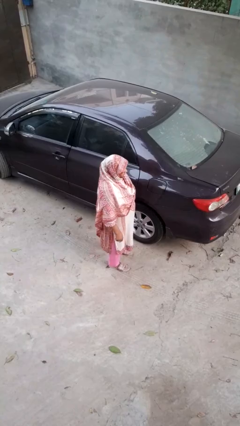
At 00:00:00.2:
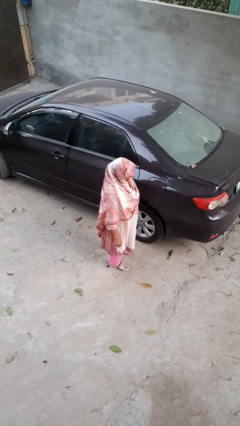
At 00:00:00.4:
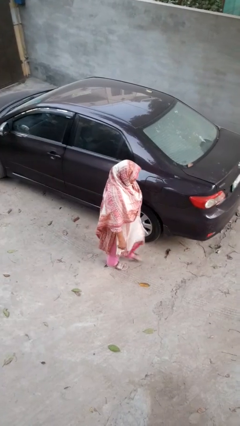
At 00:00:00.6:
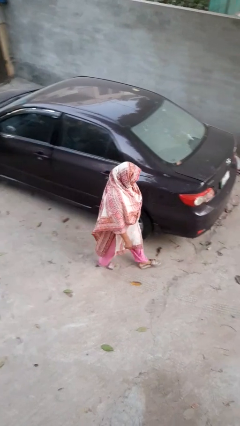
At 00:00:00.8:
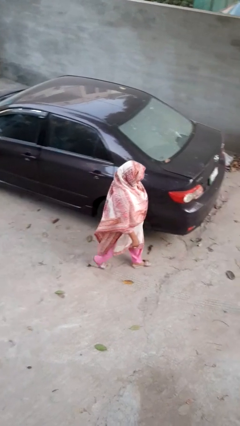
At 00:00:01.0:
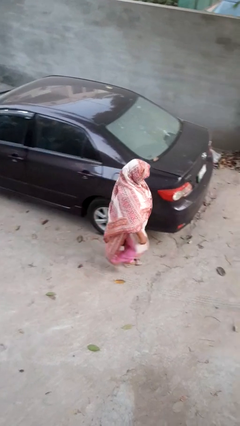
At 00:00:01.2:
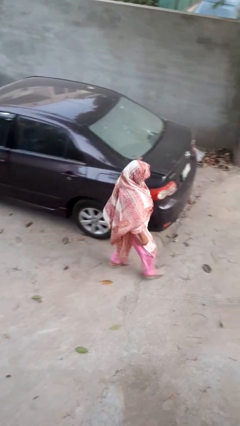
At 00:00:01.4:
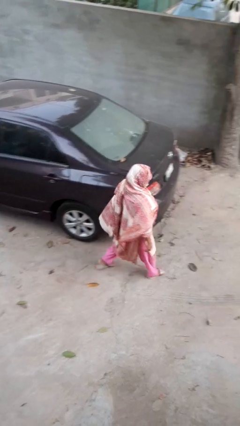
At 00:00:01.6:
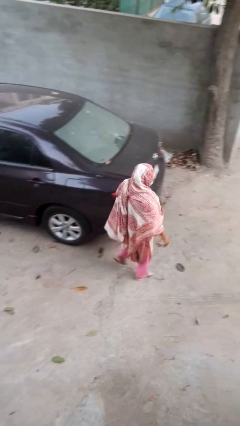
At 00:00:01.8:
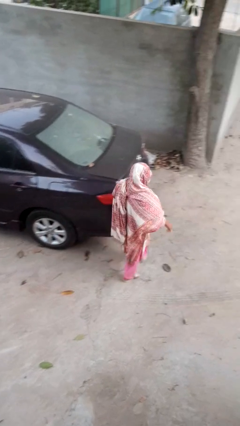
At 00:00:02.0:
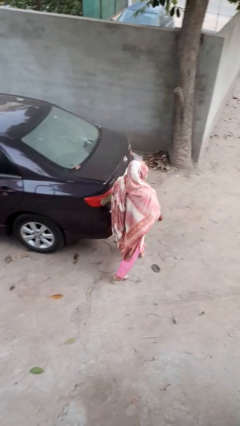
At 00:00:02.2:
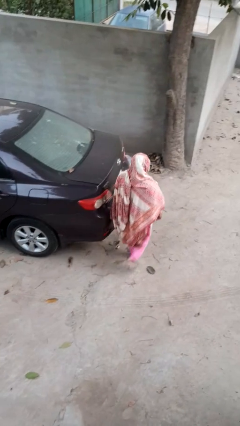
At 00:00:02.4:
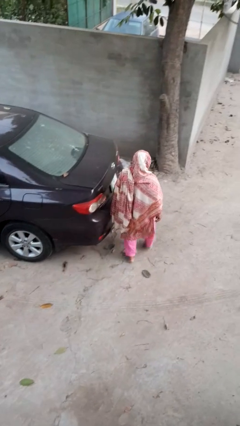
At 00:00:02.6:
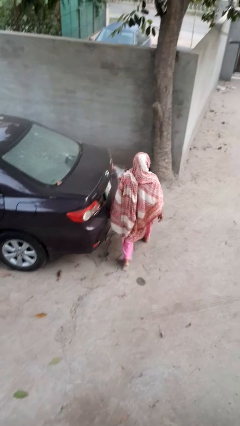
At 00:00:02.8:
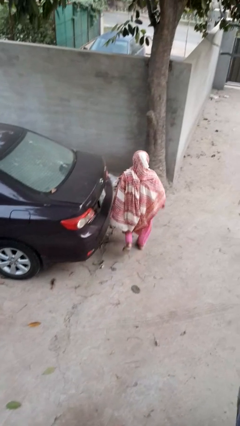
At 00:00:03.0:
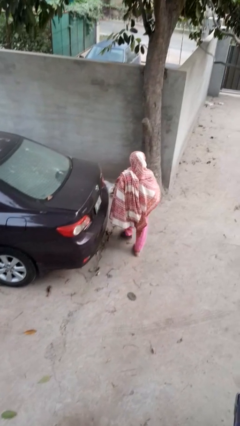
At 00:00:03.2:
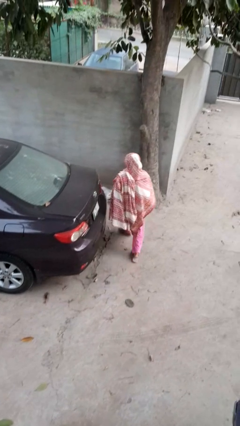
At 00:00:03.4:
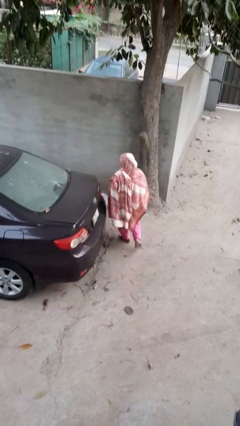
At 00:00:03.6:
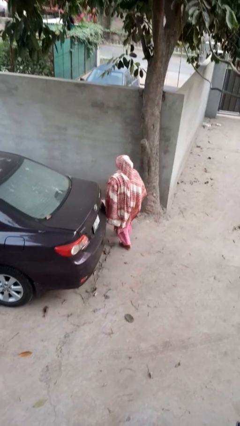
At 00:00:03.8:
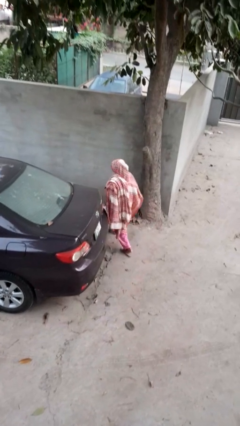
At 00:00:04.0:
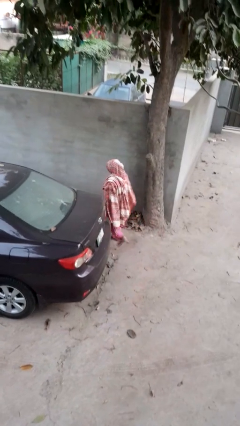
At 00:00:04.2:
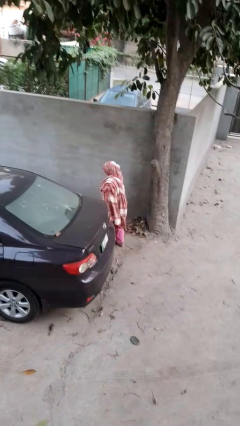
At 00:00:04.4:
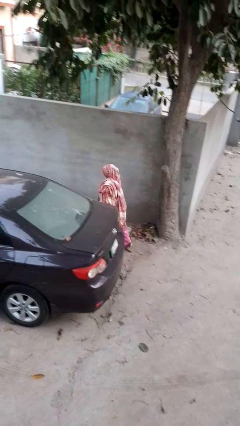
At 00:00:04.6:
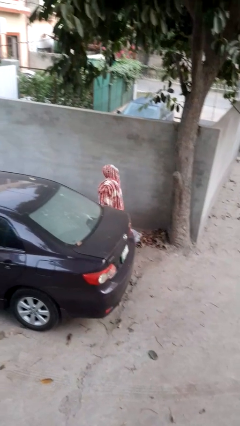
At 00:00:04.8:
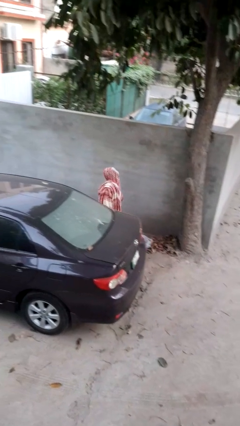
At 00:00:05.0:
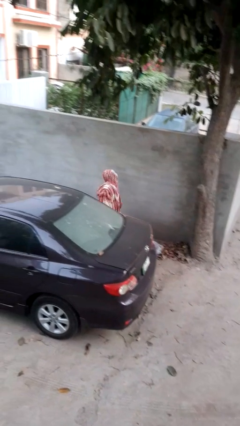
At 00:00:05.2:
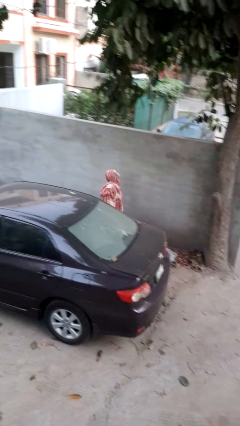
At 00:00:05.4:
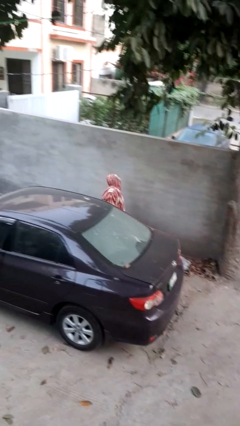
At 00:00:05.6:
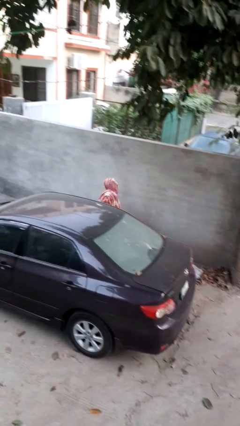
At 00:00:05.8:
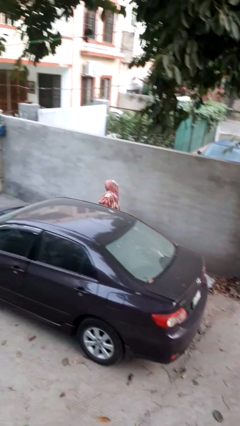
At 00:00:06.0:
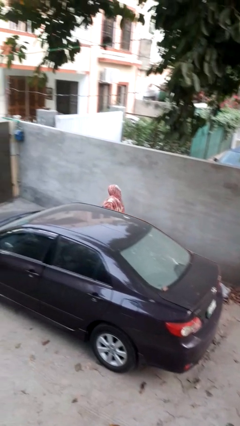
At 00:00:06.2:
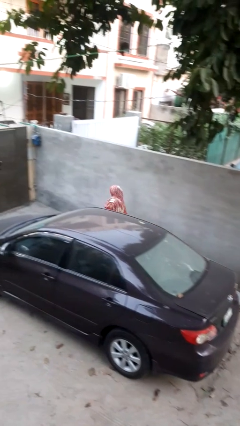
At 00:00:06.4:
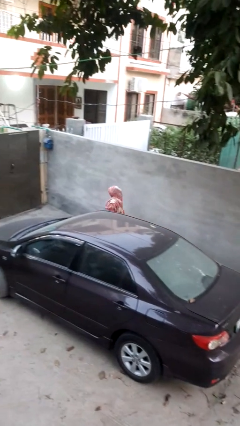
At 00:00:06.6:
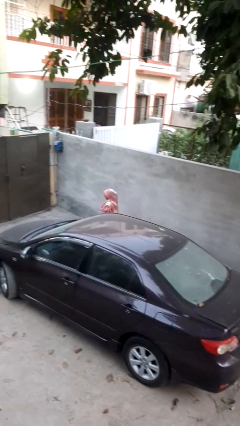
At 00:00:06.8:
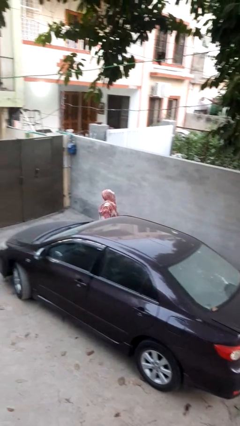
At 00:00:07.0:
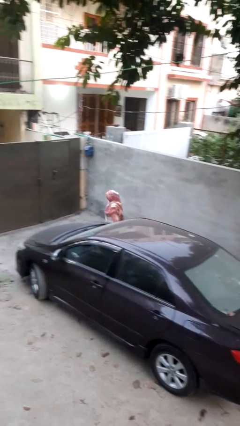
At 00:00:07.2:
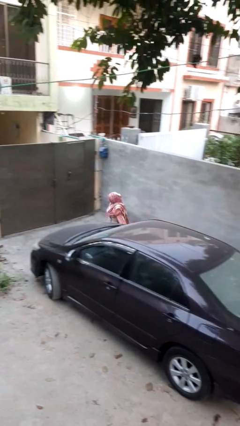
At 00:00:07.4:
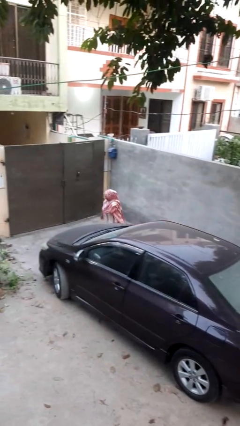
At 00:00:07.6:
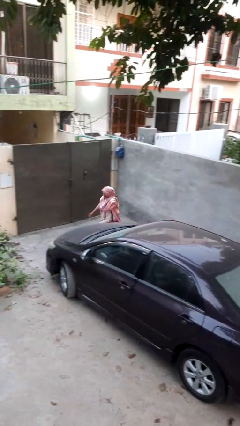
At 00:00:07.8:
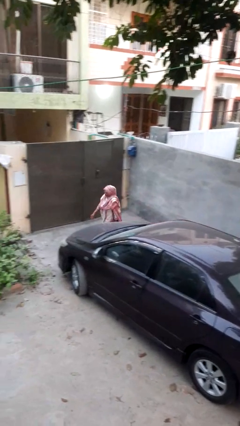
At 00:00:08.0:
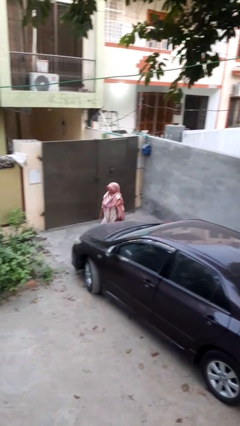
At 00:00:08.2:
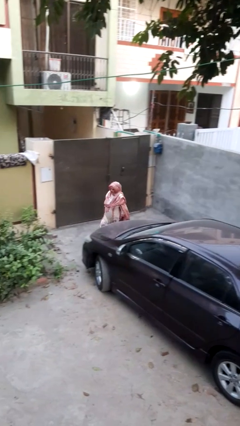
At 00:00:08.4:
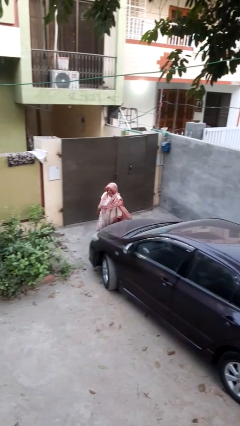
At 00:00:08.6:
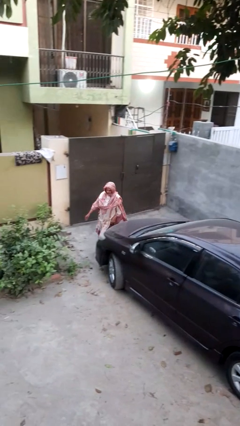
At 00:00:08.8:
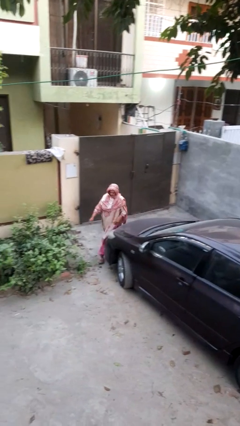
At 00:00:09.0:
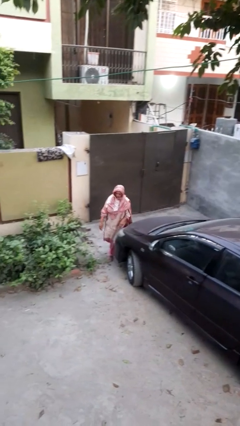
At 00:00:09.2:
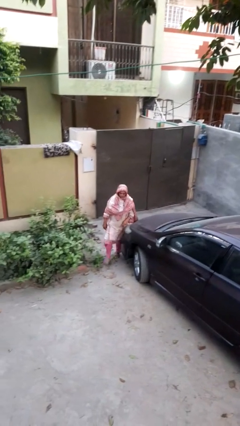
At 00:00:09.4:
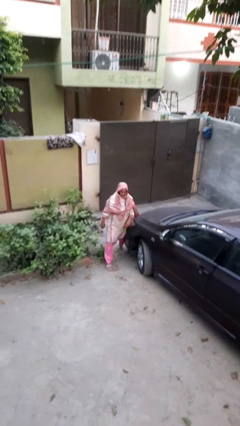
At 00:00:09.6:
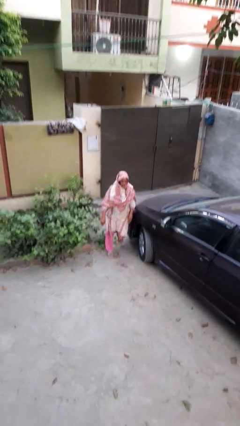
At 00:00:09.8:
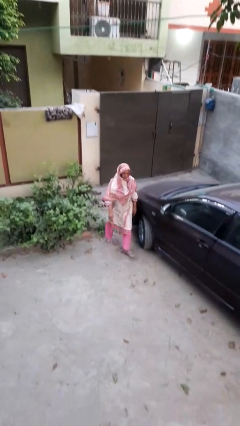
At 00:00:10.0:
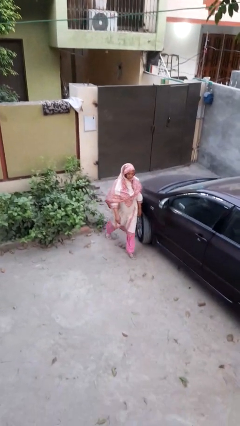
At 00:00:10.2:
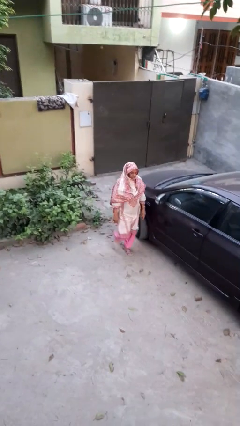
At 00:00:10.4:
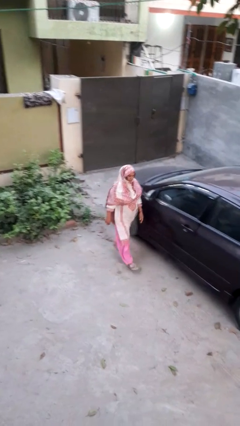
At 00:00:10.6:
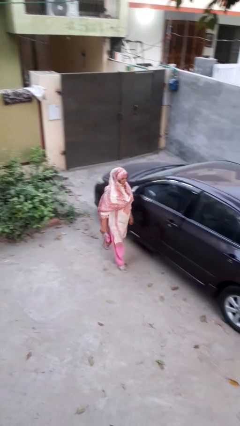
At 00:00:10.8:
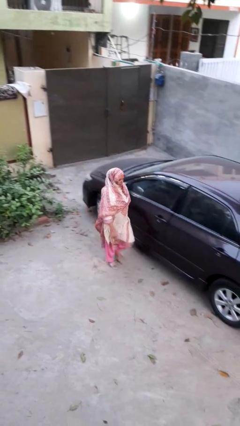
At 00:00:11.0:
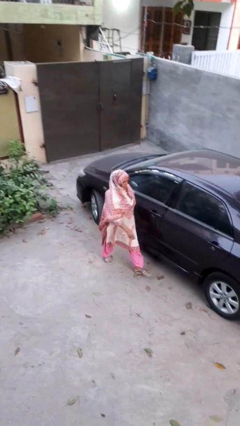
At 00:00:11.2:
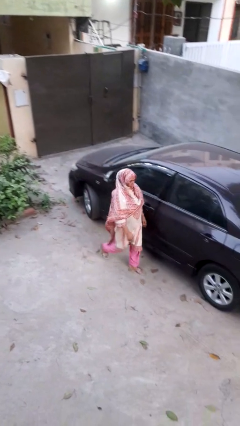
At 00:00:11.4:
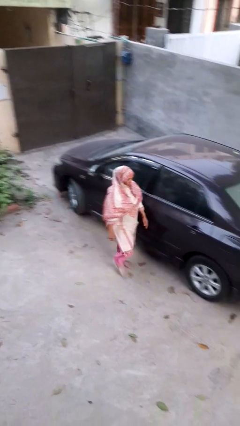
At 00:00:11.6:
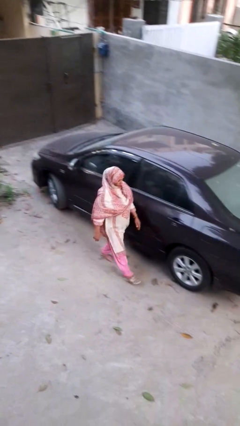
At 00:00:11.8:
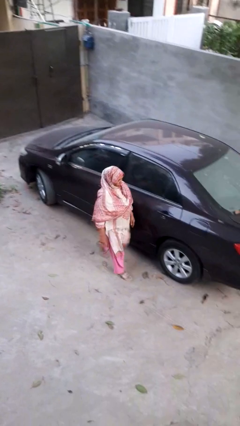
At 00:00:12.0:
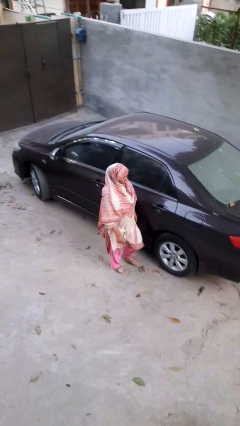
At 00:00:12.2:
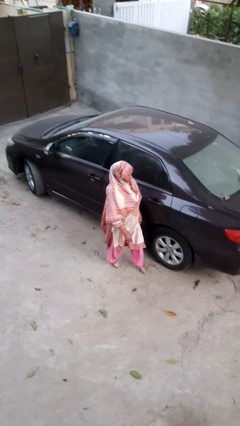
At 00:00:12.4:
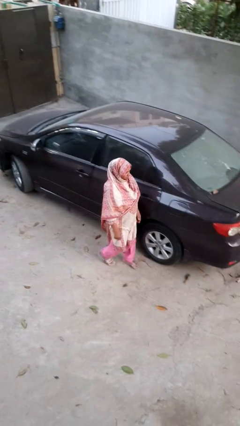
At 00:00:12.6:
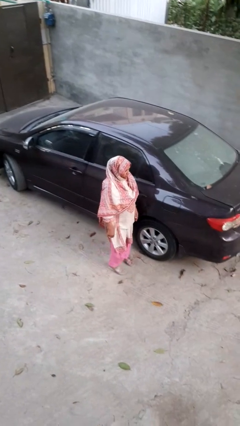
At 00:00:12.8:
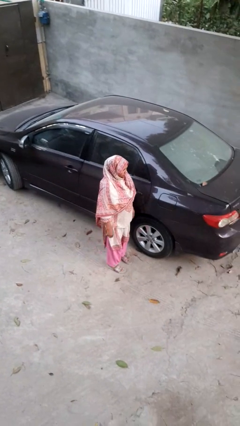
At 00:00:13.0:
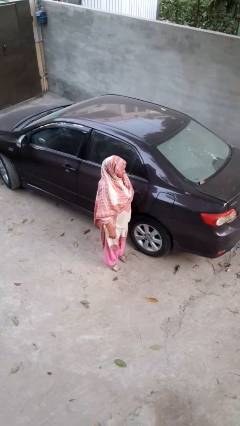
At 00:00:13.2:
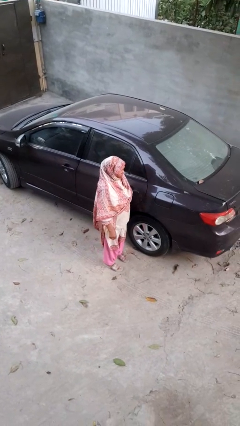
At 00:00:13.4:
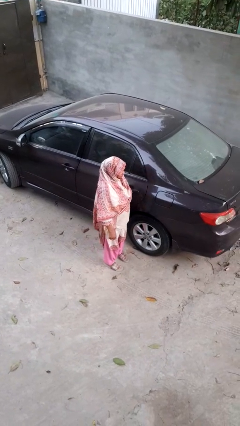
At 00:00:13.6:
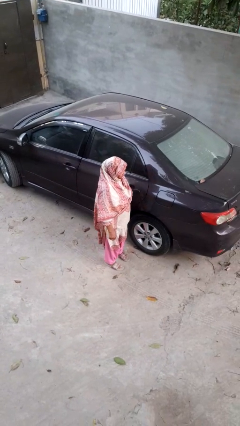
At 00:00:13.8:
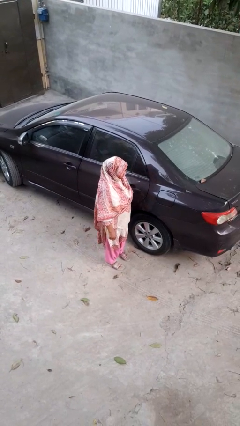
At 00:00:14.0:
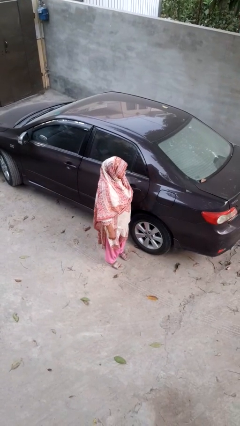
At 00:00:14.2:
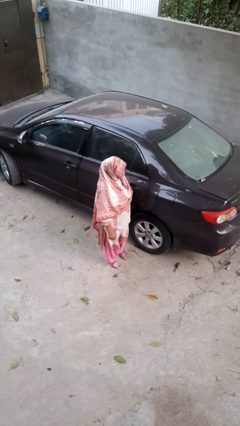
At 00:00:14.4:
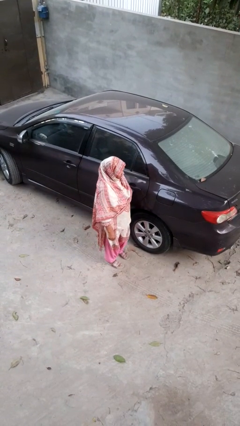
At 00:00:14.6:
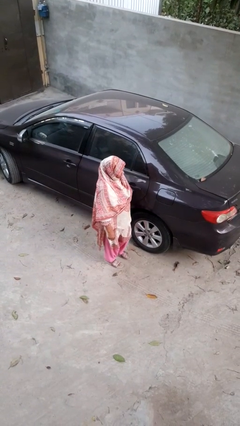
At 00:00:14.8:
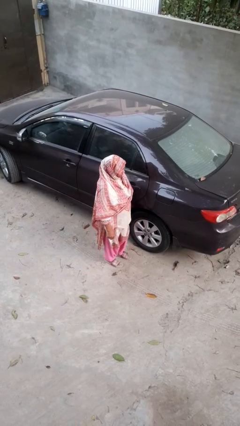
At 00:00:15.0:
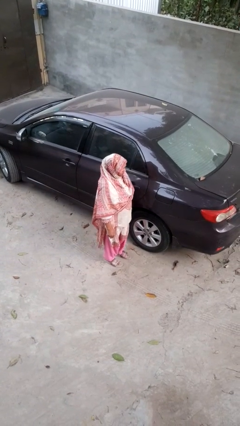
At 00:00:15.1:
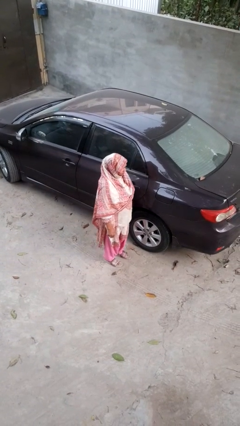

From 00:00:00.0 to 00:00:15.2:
person walks around car

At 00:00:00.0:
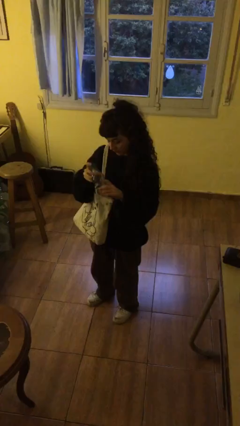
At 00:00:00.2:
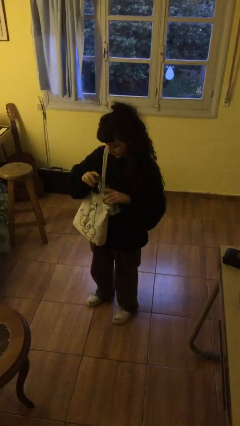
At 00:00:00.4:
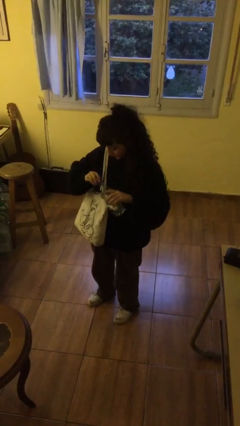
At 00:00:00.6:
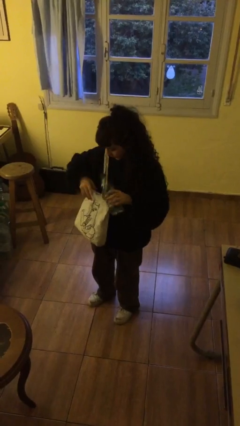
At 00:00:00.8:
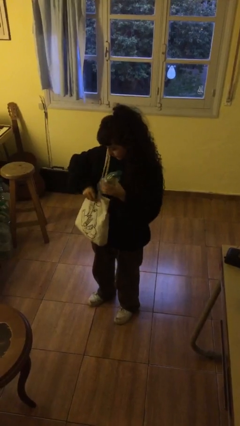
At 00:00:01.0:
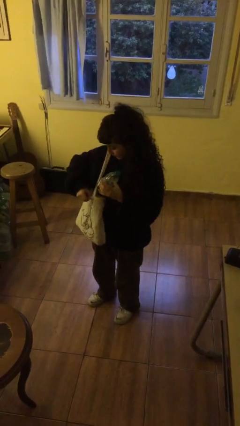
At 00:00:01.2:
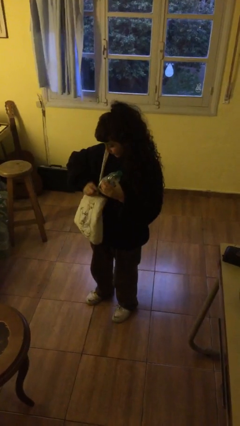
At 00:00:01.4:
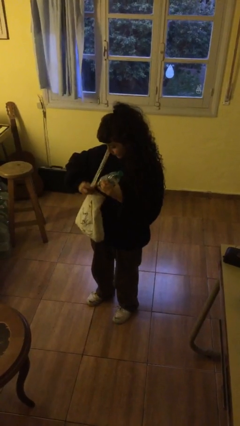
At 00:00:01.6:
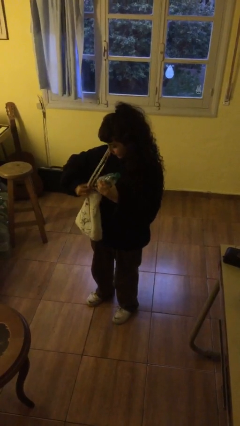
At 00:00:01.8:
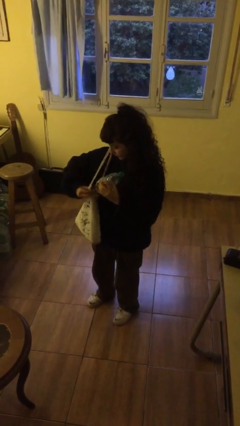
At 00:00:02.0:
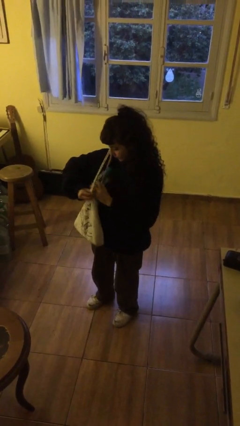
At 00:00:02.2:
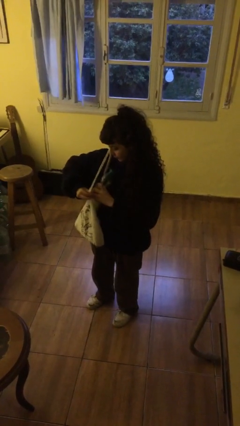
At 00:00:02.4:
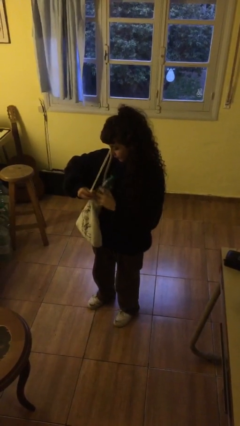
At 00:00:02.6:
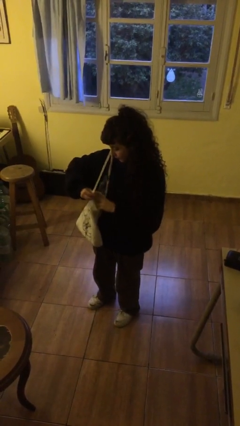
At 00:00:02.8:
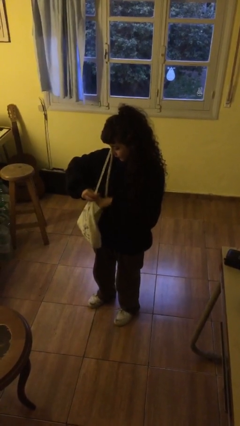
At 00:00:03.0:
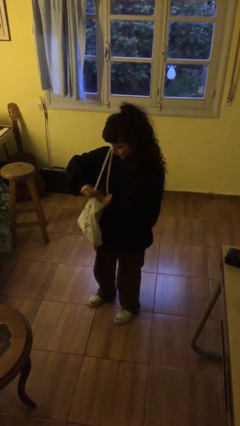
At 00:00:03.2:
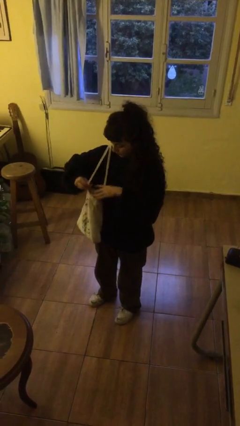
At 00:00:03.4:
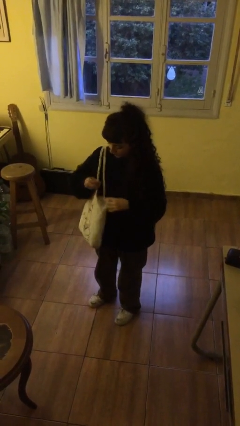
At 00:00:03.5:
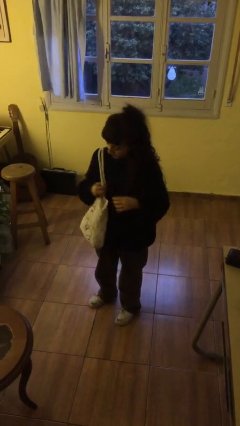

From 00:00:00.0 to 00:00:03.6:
person puts object into purse
